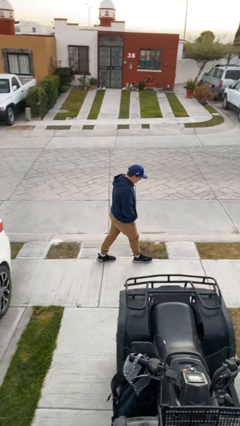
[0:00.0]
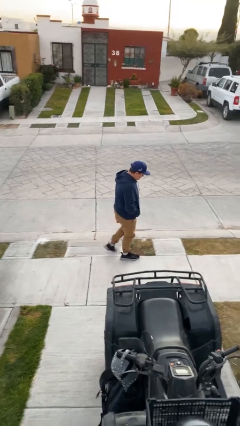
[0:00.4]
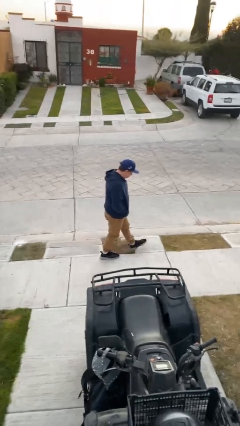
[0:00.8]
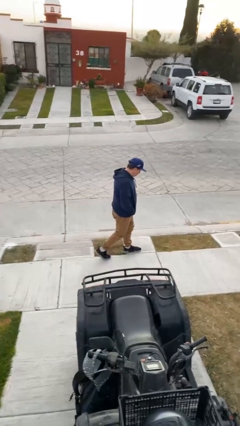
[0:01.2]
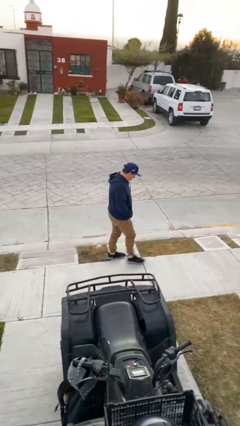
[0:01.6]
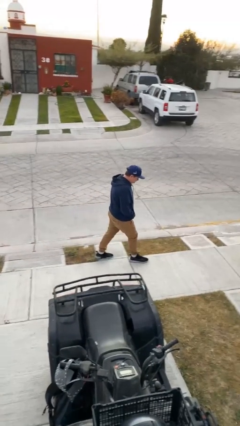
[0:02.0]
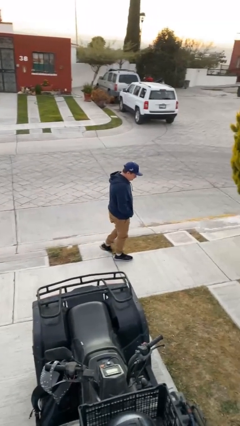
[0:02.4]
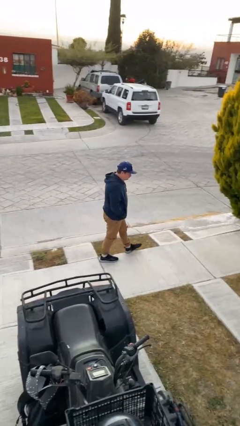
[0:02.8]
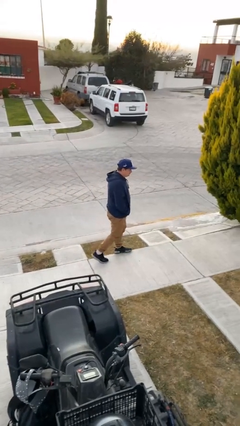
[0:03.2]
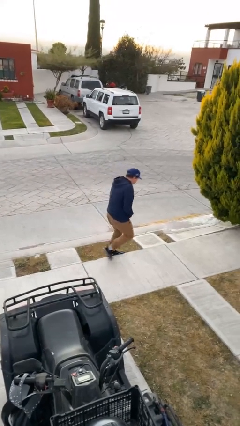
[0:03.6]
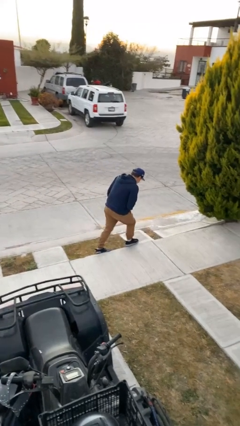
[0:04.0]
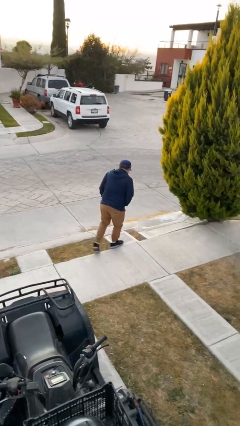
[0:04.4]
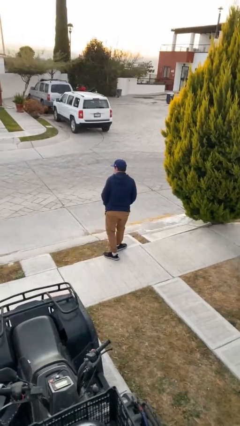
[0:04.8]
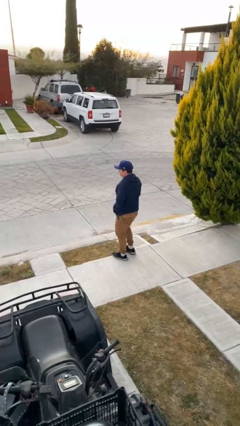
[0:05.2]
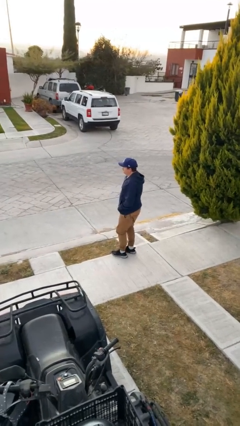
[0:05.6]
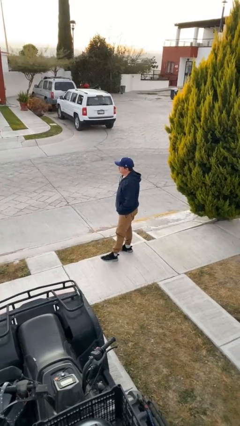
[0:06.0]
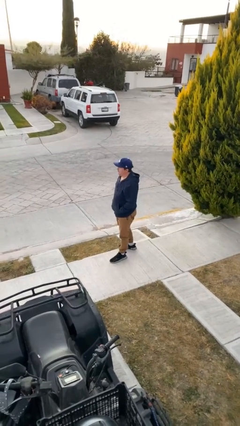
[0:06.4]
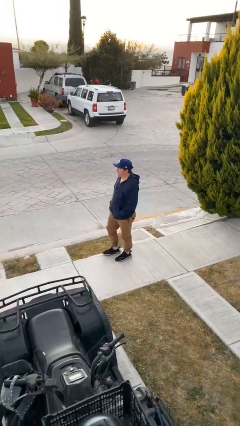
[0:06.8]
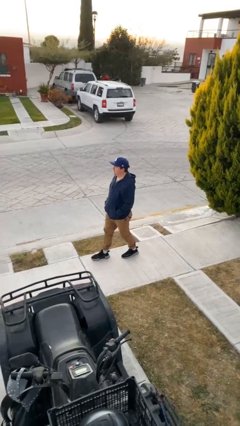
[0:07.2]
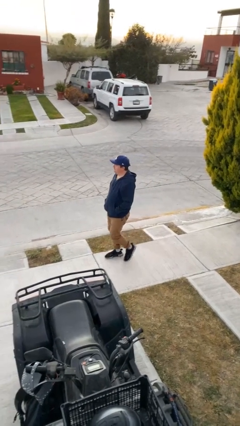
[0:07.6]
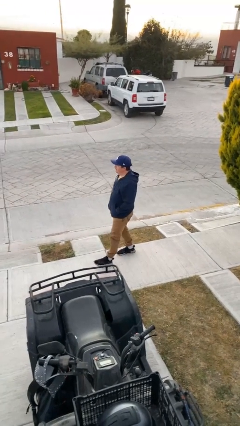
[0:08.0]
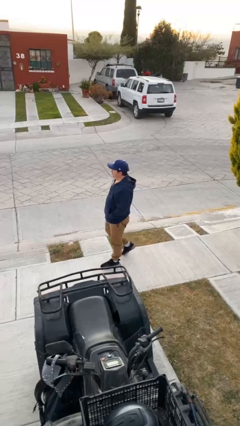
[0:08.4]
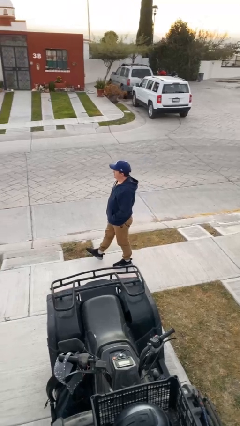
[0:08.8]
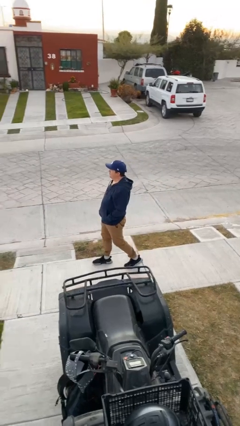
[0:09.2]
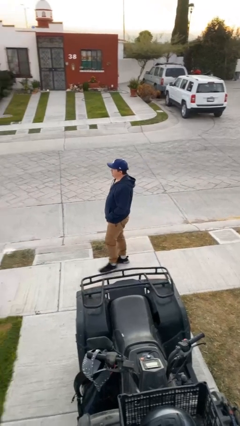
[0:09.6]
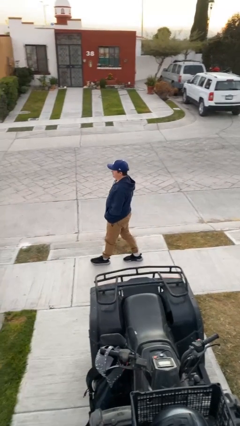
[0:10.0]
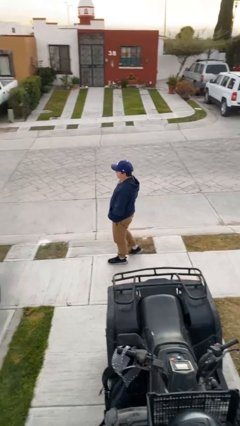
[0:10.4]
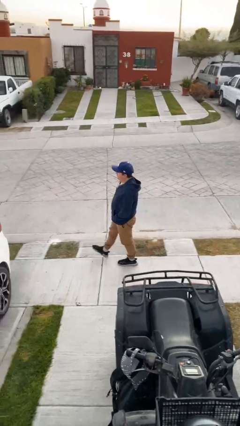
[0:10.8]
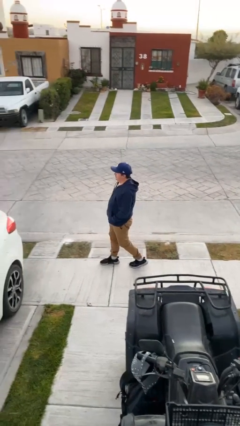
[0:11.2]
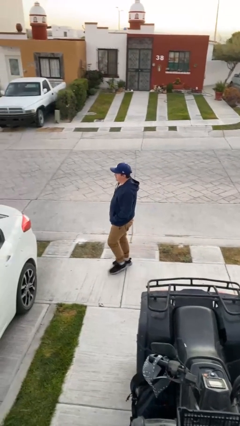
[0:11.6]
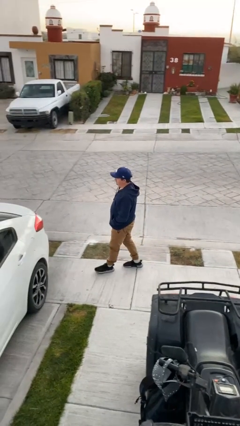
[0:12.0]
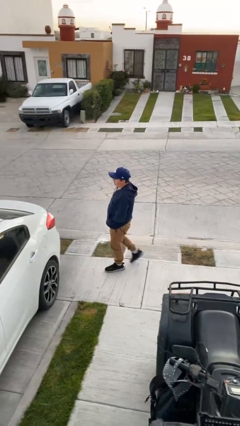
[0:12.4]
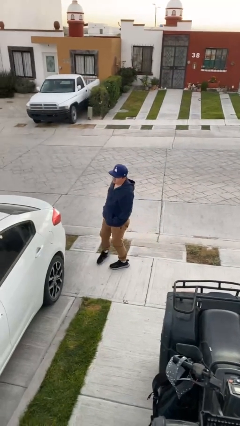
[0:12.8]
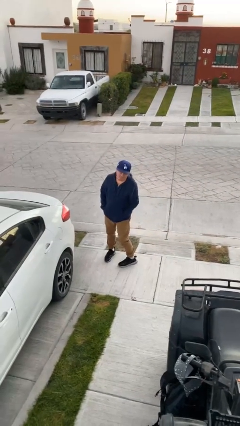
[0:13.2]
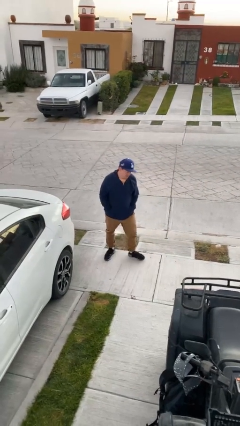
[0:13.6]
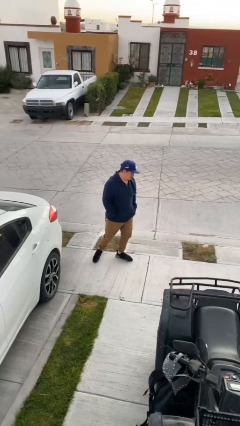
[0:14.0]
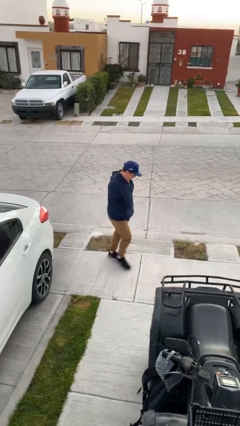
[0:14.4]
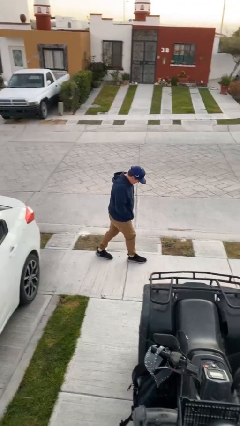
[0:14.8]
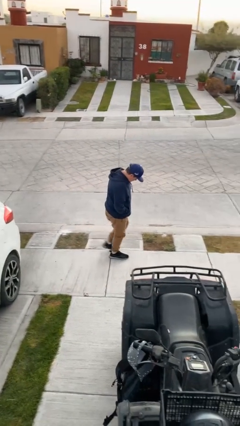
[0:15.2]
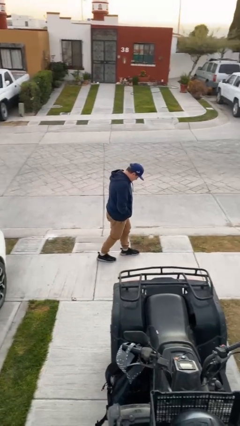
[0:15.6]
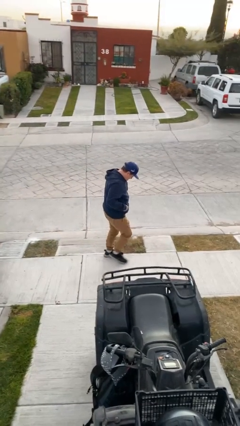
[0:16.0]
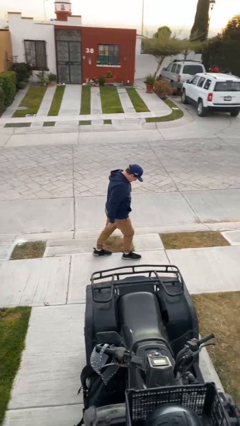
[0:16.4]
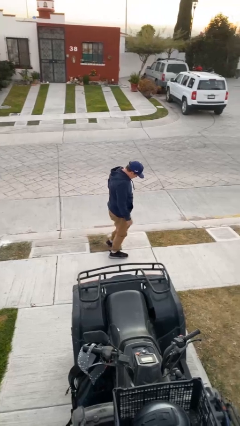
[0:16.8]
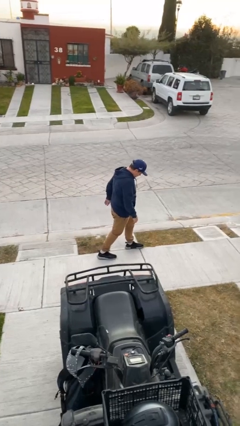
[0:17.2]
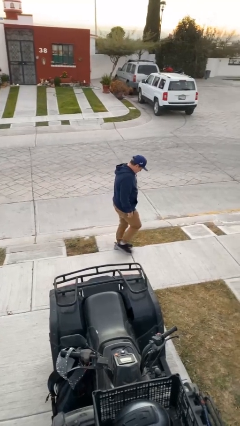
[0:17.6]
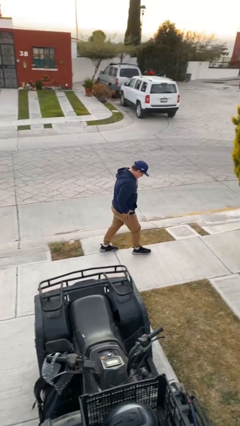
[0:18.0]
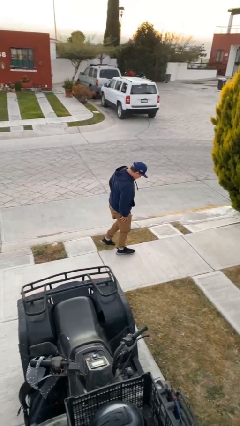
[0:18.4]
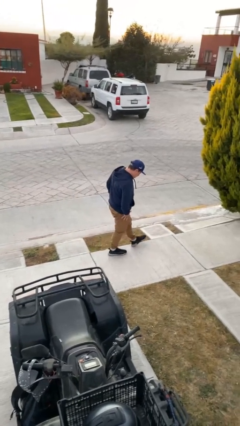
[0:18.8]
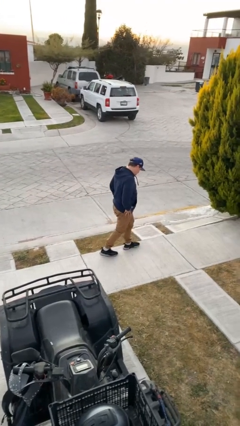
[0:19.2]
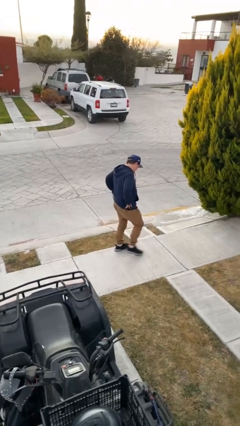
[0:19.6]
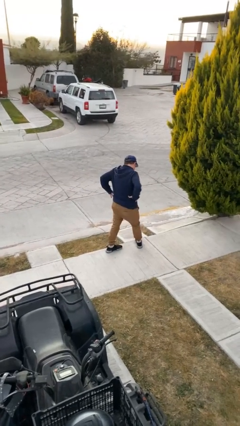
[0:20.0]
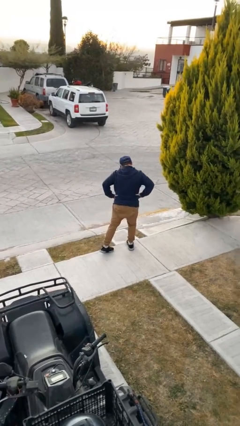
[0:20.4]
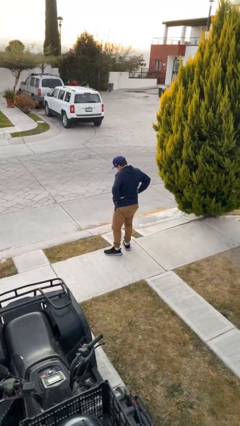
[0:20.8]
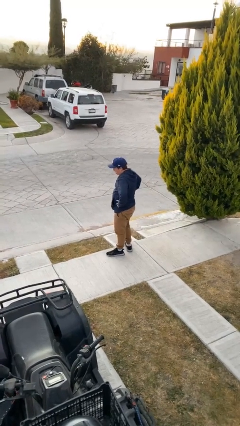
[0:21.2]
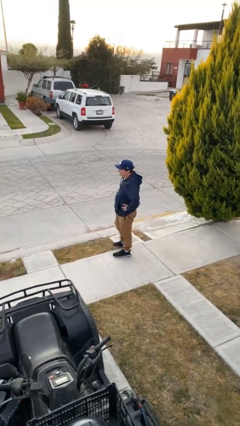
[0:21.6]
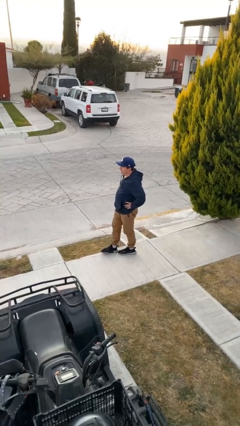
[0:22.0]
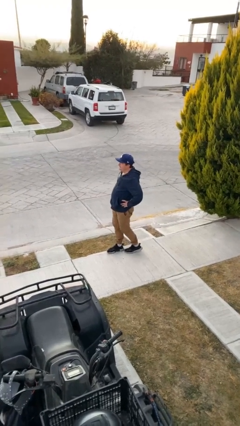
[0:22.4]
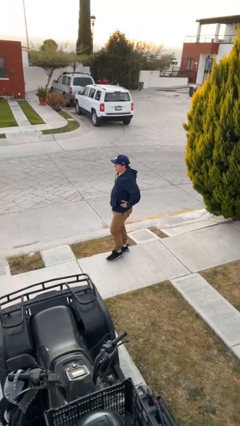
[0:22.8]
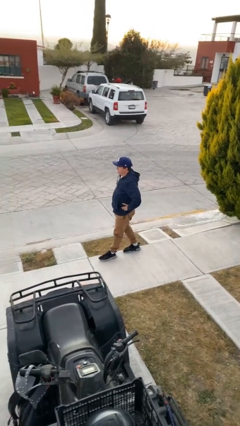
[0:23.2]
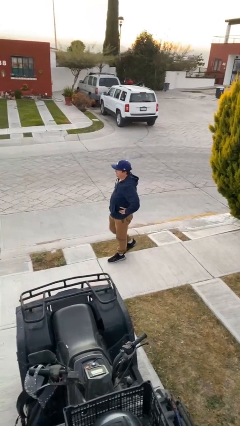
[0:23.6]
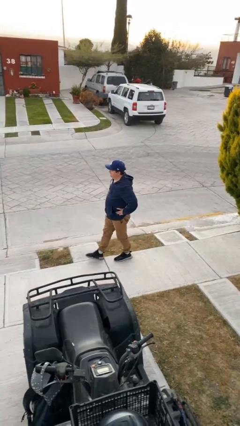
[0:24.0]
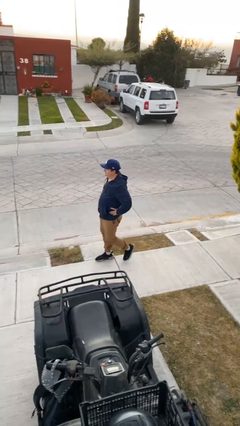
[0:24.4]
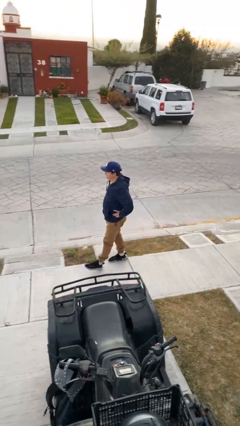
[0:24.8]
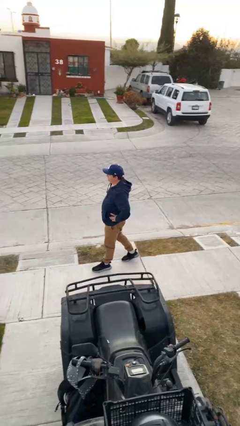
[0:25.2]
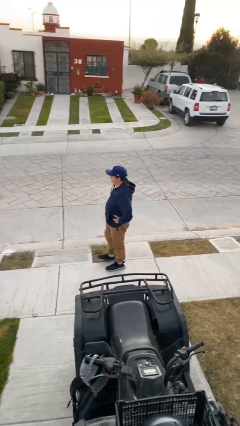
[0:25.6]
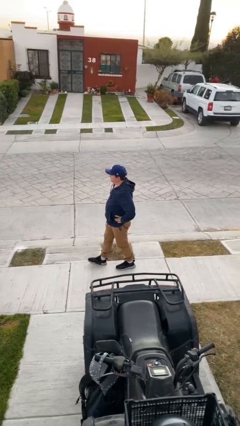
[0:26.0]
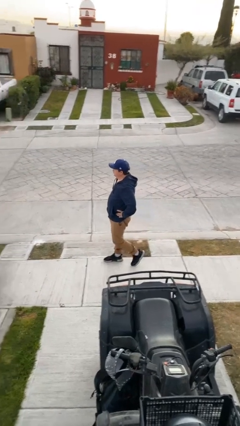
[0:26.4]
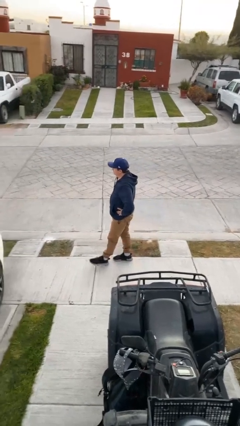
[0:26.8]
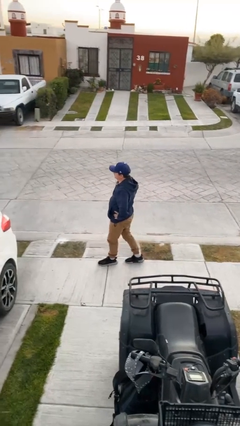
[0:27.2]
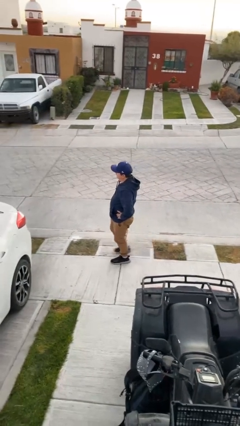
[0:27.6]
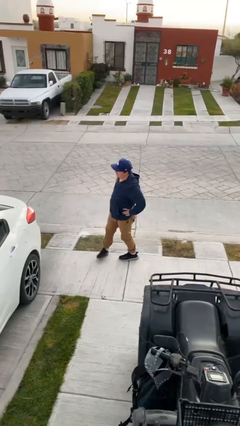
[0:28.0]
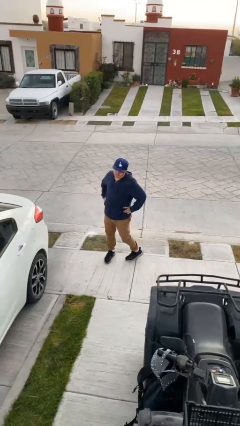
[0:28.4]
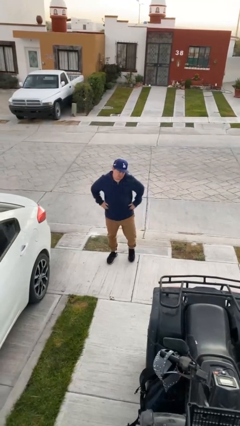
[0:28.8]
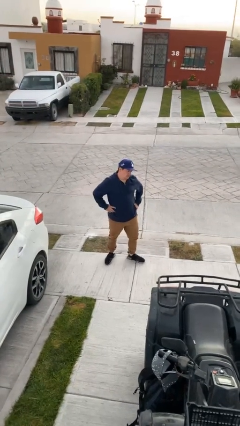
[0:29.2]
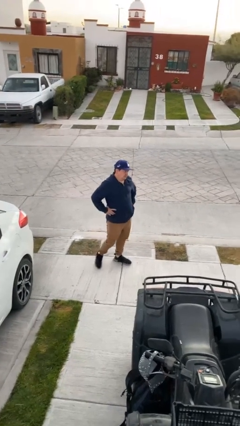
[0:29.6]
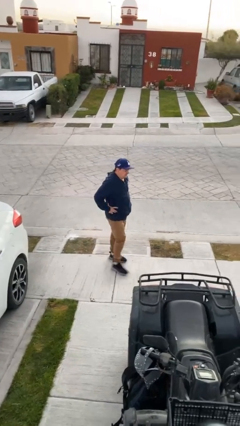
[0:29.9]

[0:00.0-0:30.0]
person walks

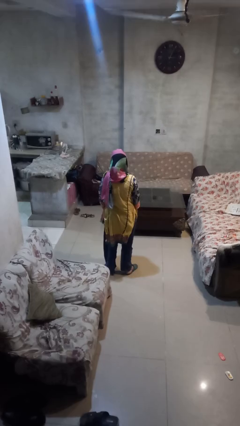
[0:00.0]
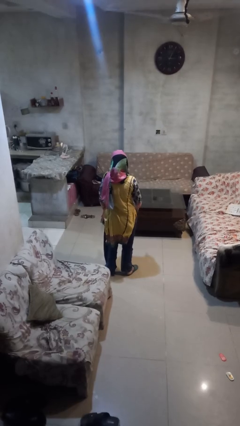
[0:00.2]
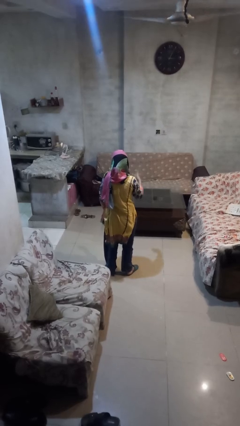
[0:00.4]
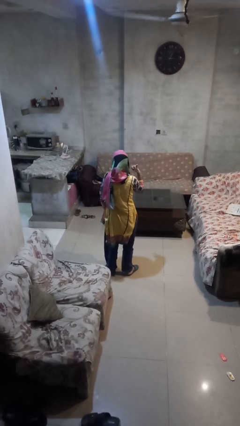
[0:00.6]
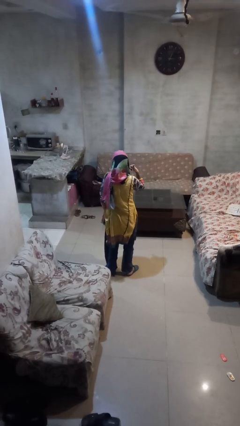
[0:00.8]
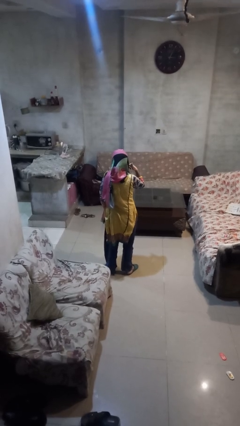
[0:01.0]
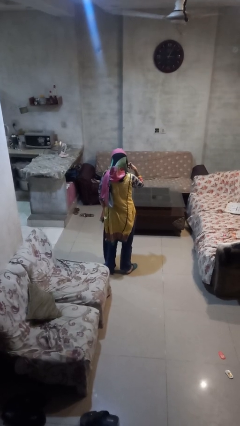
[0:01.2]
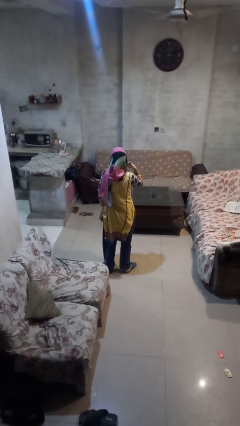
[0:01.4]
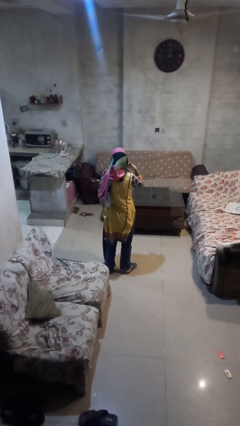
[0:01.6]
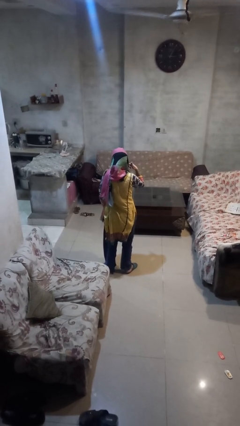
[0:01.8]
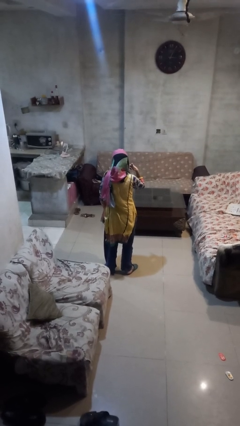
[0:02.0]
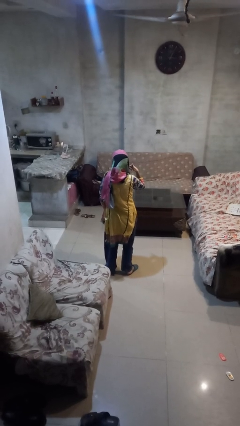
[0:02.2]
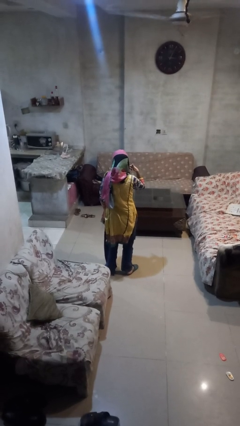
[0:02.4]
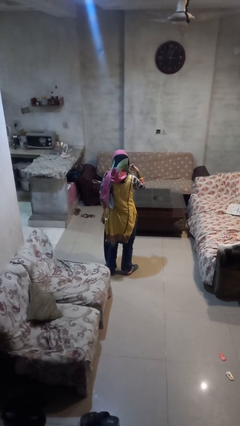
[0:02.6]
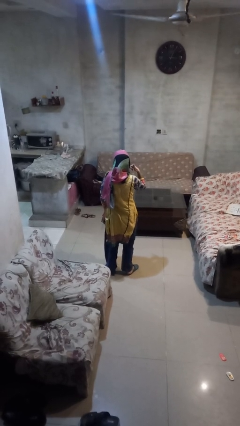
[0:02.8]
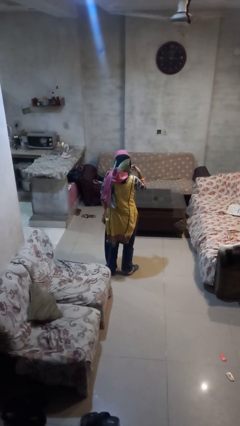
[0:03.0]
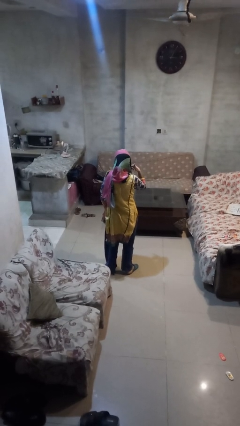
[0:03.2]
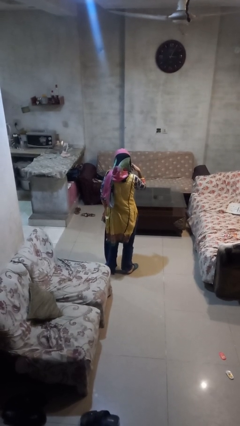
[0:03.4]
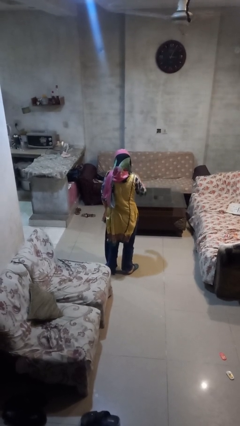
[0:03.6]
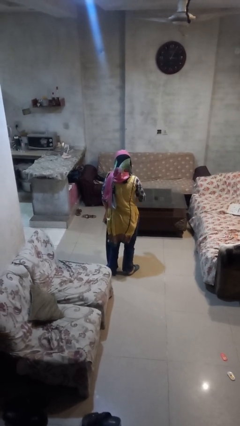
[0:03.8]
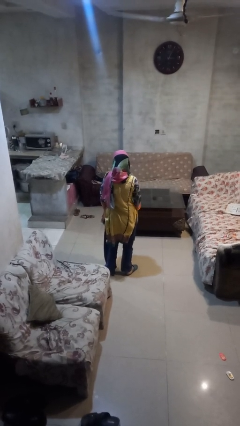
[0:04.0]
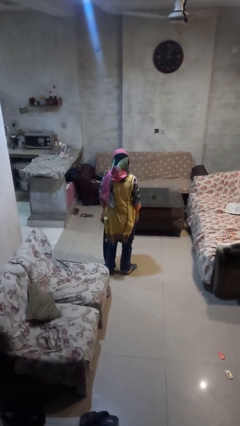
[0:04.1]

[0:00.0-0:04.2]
person gestures call me
